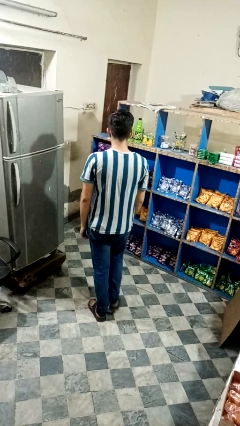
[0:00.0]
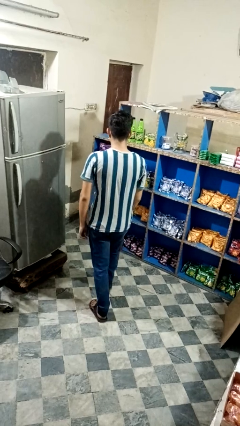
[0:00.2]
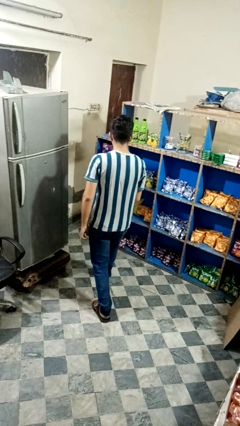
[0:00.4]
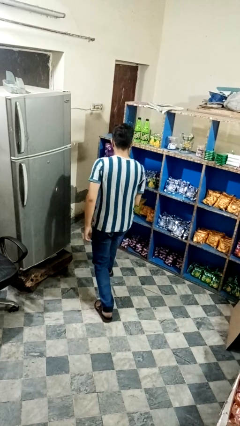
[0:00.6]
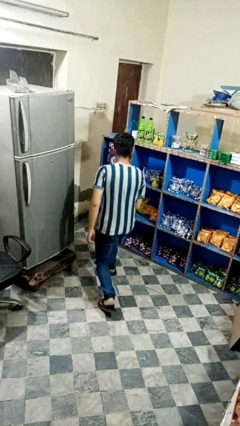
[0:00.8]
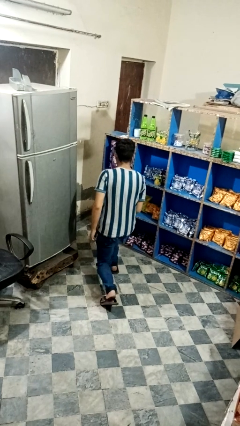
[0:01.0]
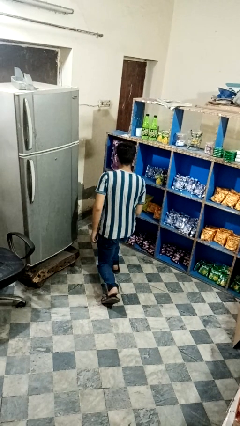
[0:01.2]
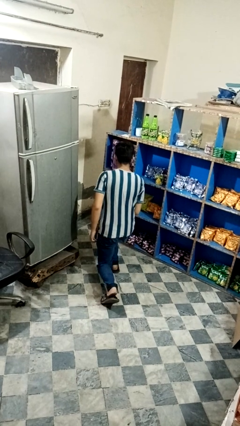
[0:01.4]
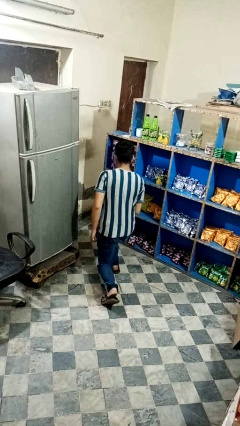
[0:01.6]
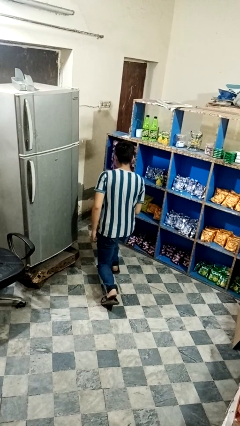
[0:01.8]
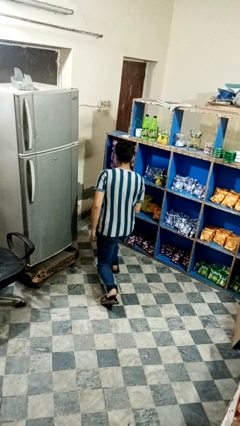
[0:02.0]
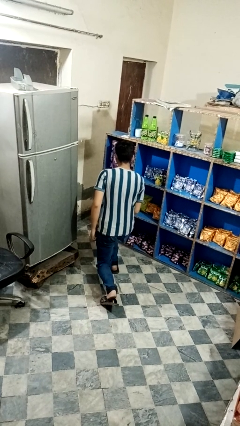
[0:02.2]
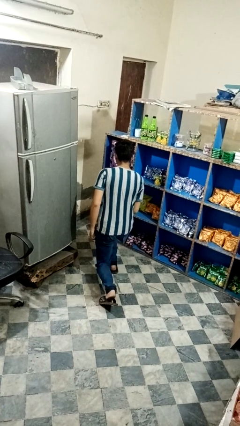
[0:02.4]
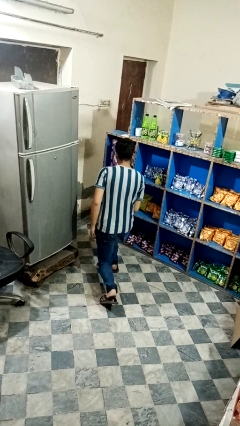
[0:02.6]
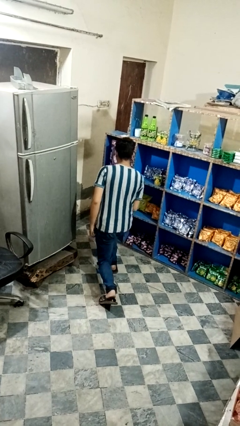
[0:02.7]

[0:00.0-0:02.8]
person exercises with lunges

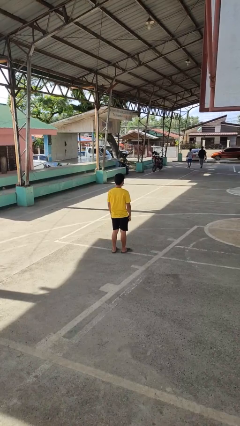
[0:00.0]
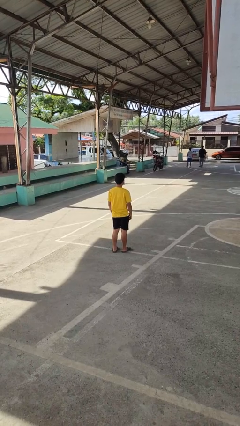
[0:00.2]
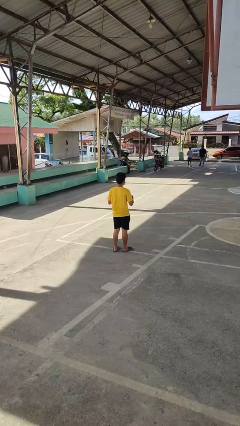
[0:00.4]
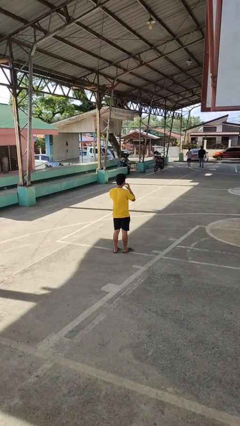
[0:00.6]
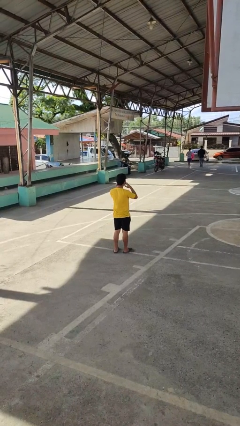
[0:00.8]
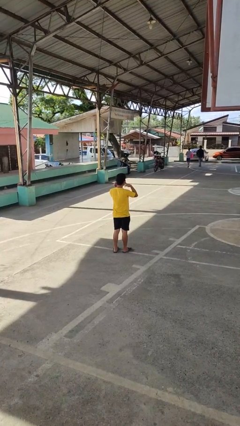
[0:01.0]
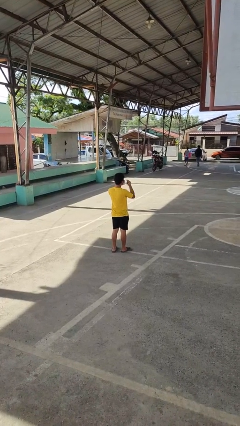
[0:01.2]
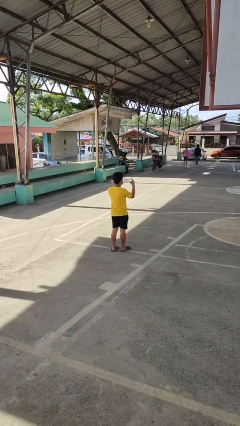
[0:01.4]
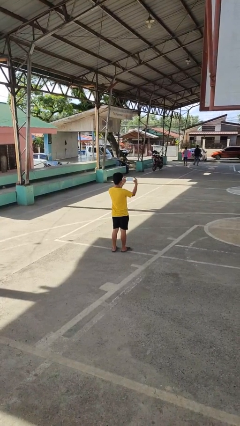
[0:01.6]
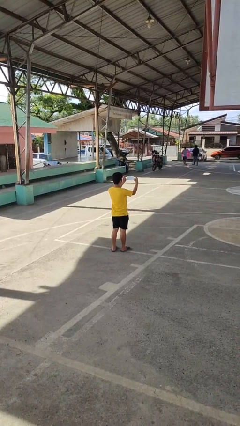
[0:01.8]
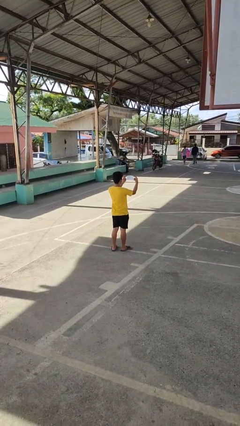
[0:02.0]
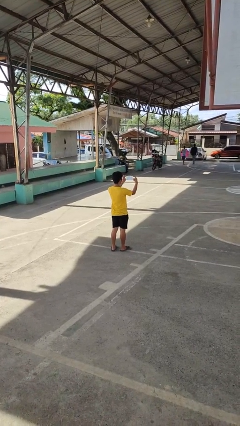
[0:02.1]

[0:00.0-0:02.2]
person takes off facemask

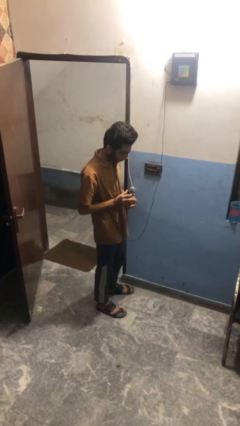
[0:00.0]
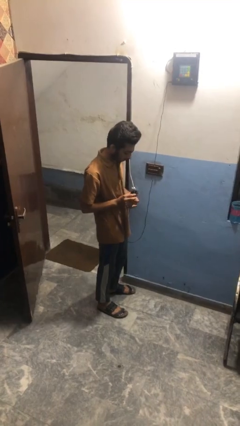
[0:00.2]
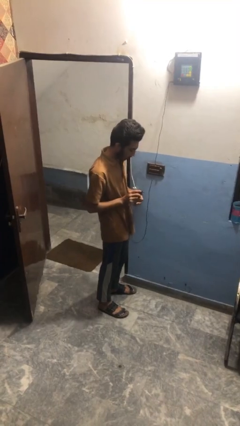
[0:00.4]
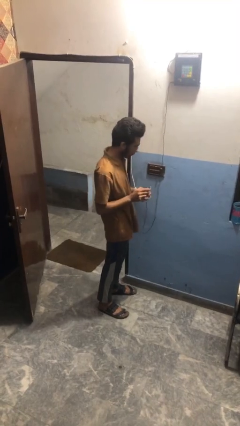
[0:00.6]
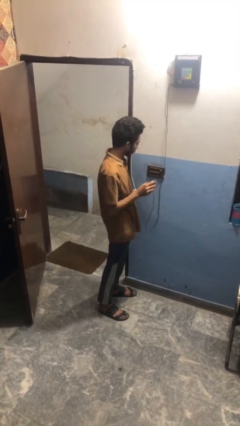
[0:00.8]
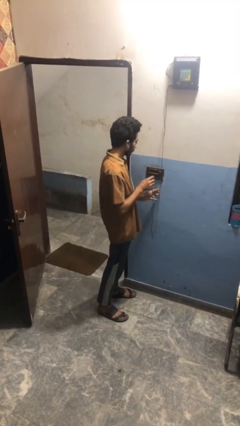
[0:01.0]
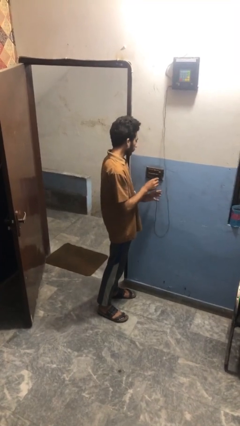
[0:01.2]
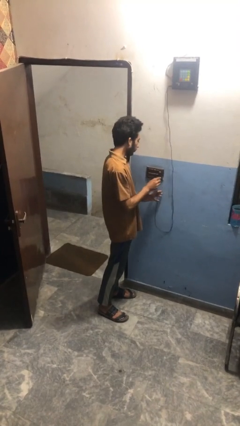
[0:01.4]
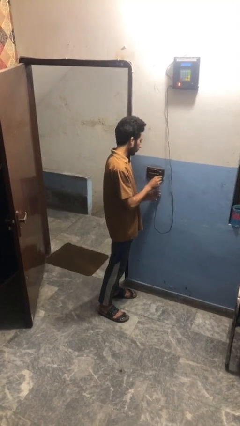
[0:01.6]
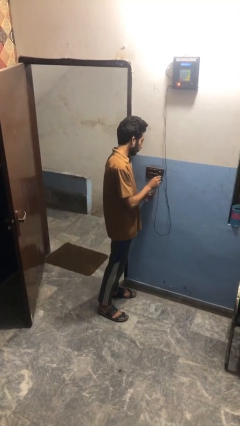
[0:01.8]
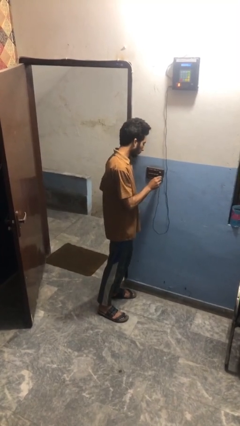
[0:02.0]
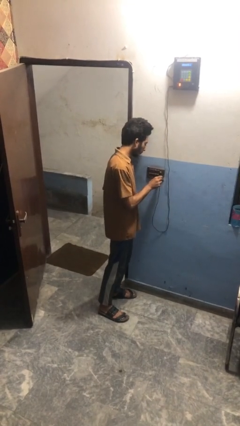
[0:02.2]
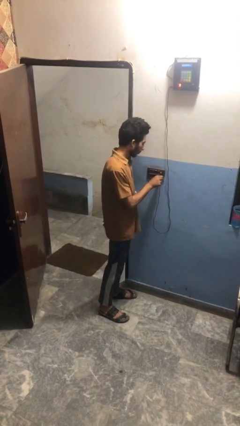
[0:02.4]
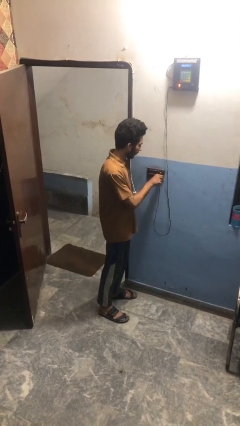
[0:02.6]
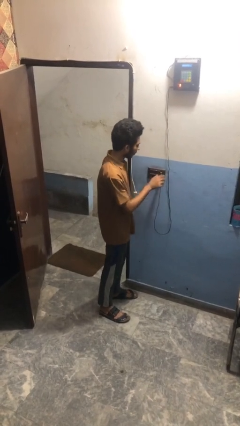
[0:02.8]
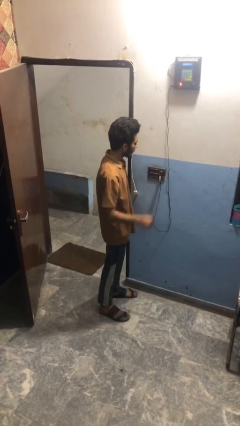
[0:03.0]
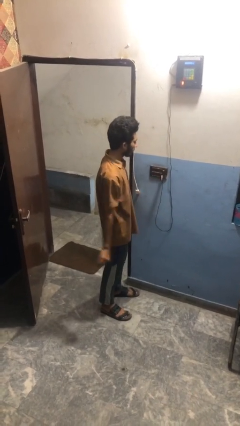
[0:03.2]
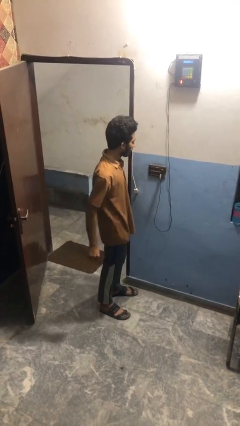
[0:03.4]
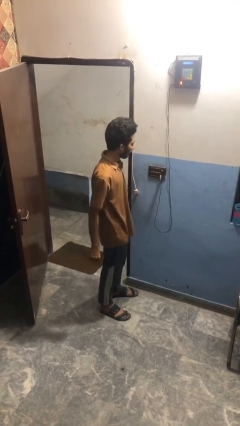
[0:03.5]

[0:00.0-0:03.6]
person plugs into electrical socket

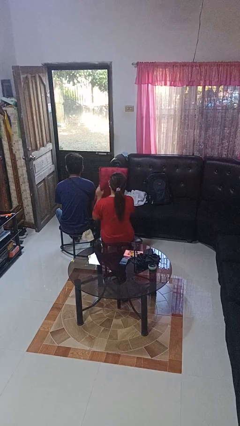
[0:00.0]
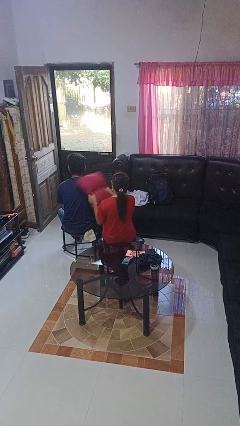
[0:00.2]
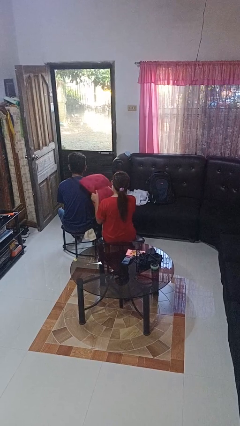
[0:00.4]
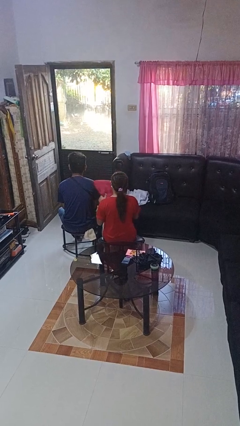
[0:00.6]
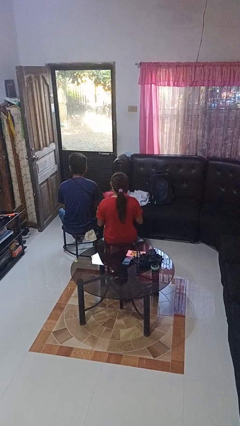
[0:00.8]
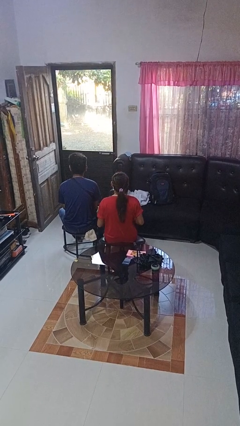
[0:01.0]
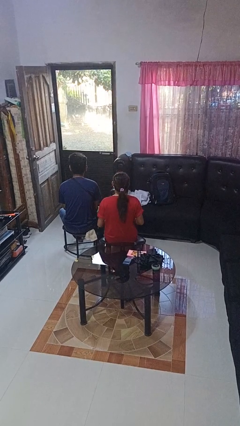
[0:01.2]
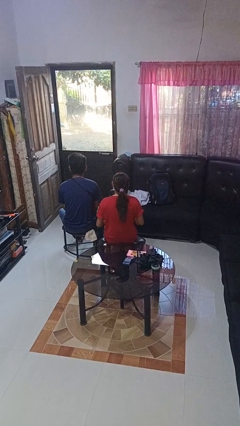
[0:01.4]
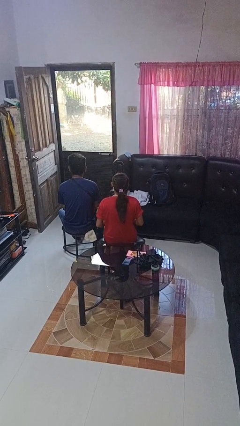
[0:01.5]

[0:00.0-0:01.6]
person hits person with pillow

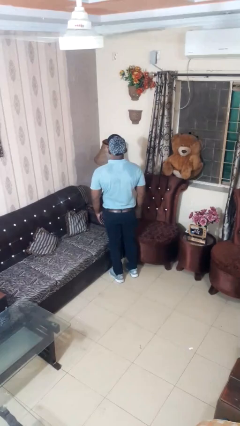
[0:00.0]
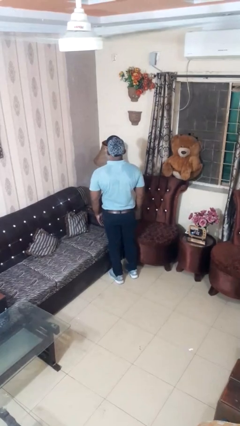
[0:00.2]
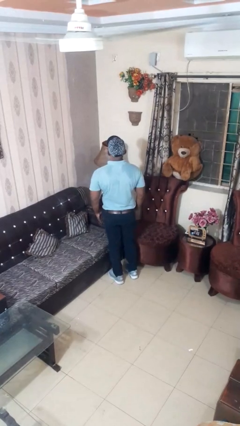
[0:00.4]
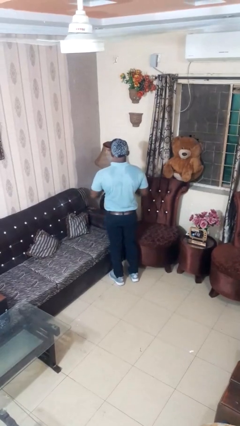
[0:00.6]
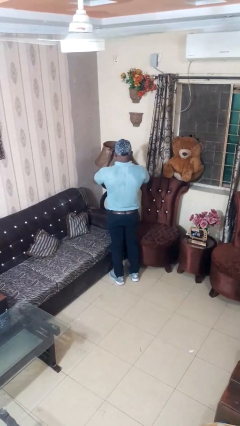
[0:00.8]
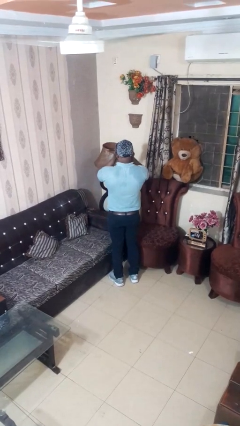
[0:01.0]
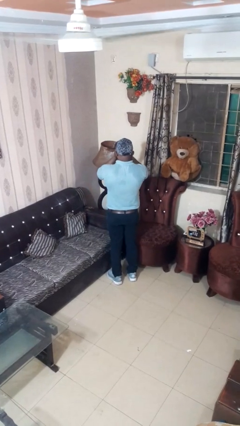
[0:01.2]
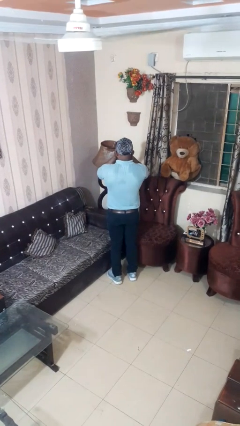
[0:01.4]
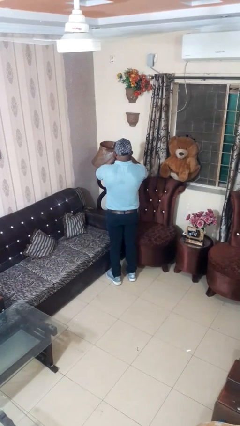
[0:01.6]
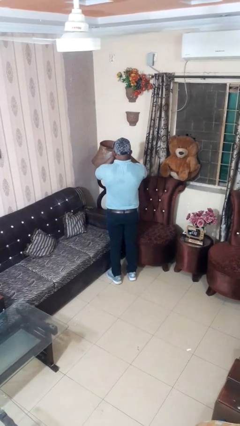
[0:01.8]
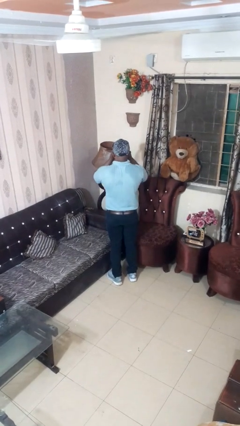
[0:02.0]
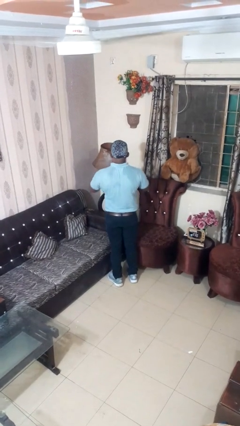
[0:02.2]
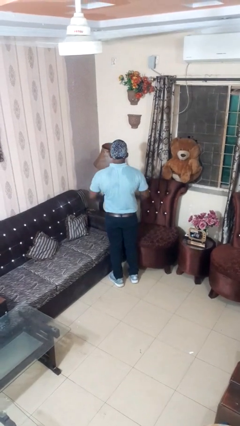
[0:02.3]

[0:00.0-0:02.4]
person covers face with hands

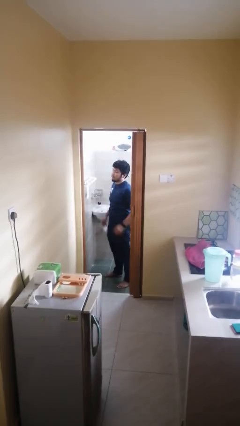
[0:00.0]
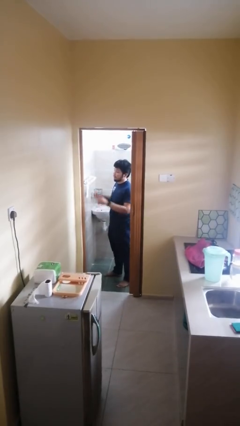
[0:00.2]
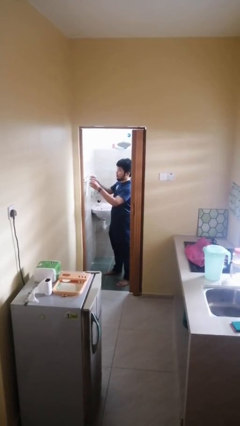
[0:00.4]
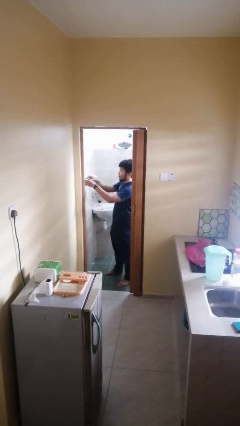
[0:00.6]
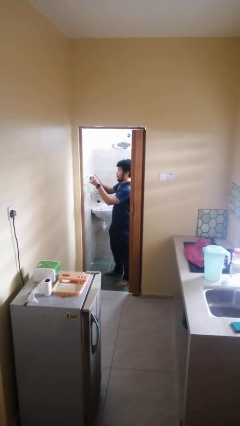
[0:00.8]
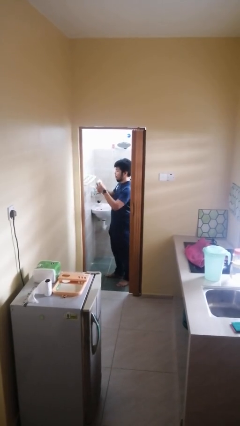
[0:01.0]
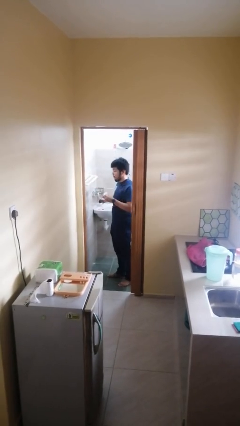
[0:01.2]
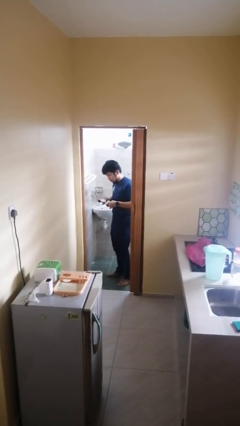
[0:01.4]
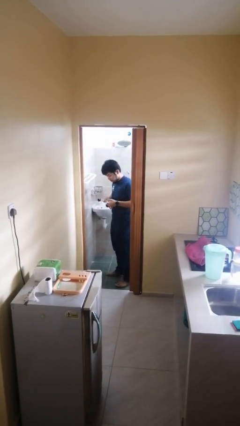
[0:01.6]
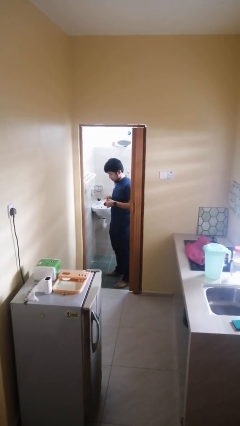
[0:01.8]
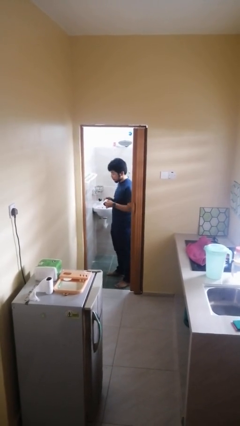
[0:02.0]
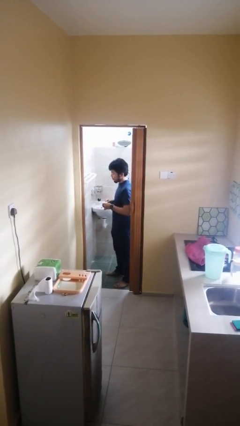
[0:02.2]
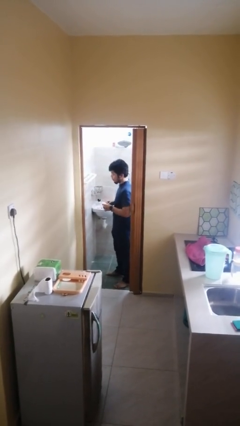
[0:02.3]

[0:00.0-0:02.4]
person picks up object from countertop

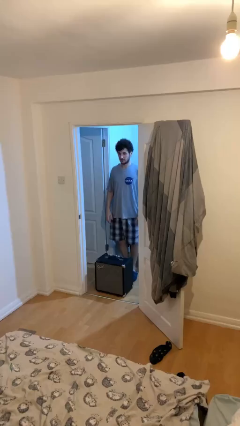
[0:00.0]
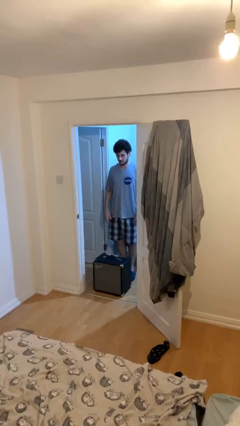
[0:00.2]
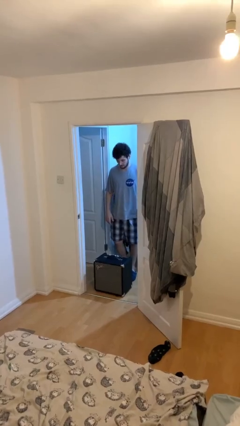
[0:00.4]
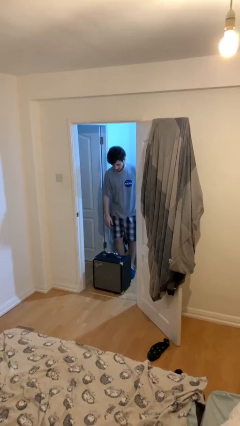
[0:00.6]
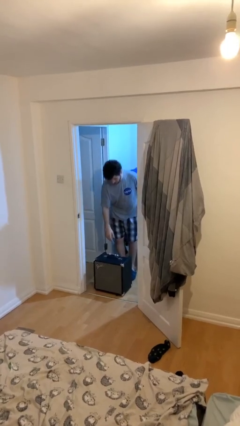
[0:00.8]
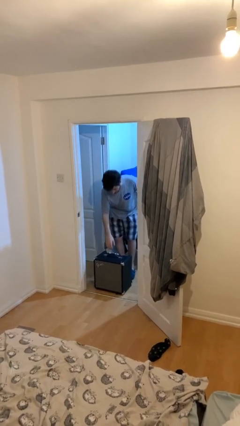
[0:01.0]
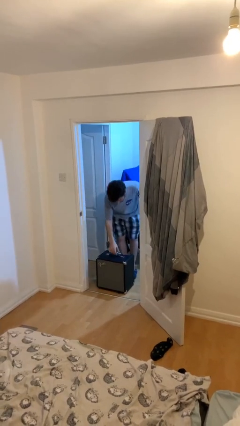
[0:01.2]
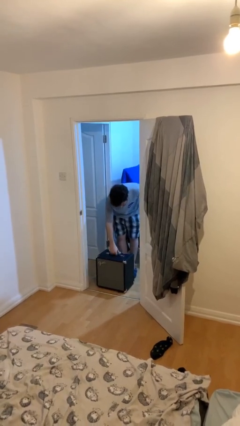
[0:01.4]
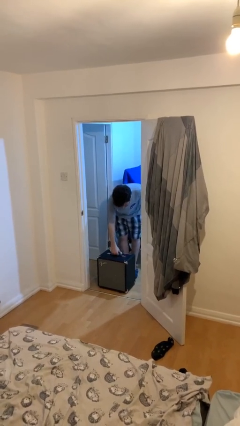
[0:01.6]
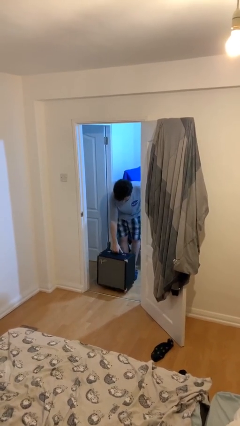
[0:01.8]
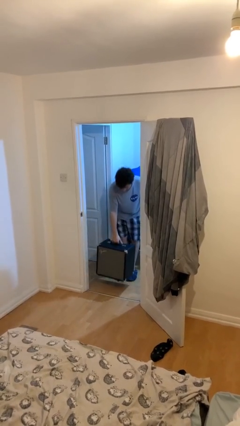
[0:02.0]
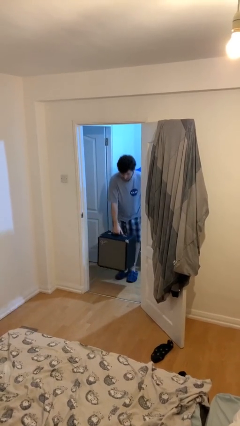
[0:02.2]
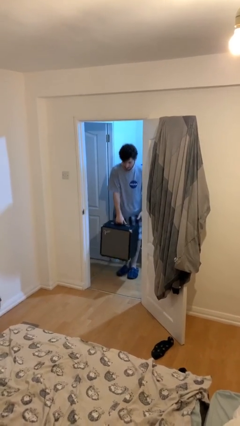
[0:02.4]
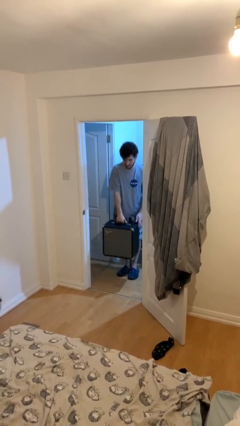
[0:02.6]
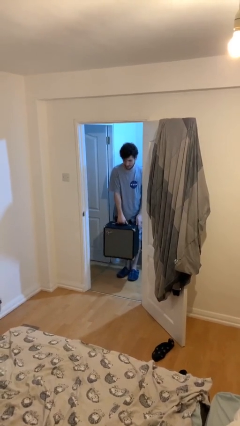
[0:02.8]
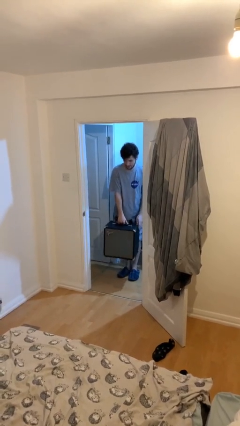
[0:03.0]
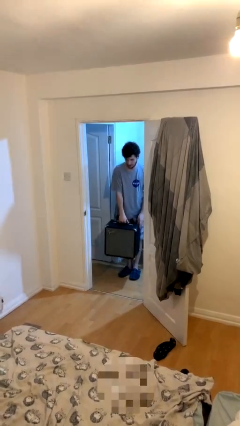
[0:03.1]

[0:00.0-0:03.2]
person picks up object from floor
